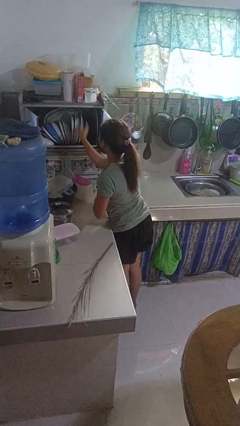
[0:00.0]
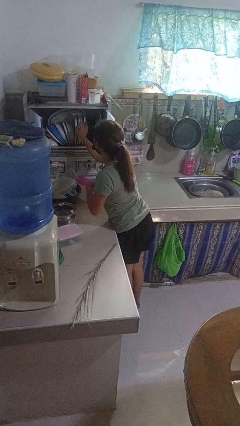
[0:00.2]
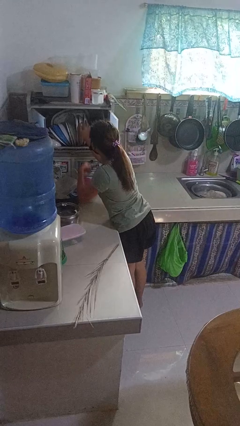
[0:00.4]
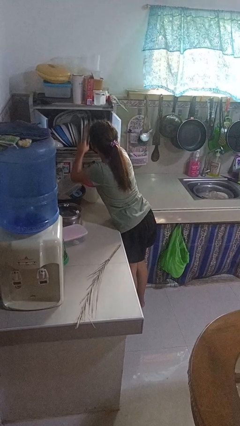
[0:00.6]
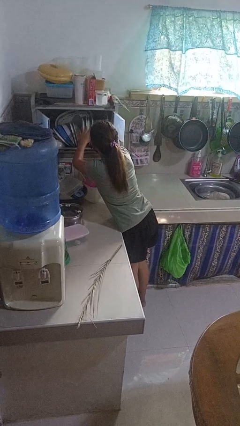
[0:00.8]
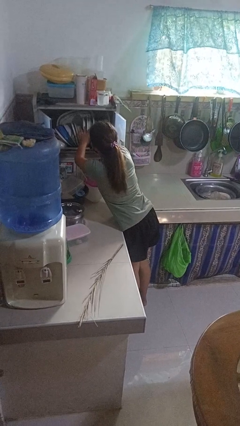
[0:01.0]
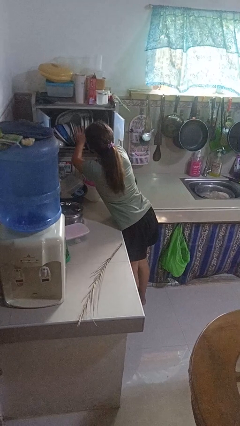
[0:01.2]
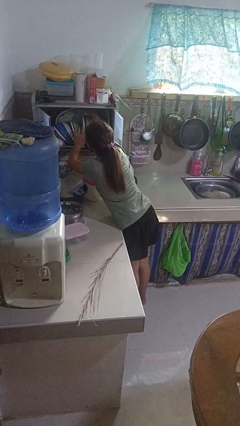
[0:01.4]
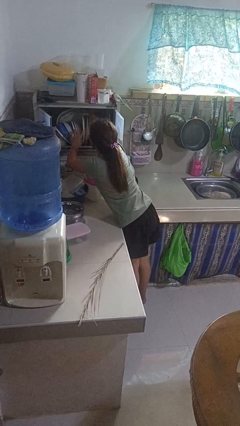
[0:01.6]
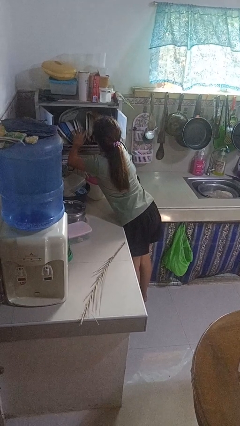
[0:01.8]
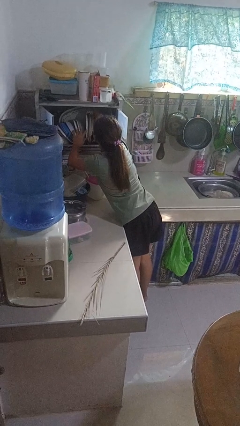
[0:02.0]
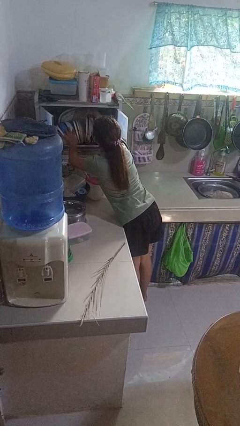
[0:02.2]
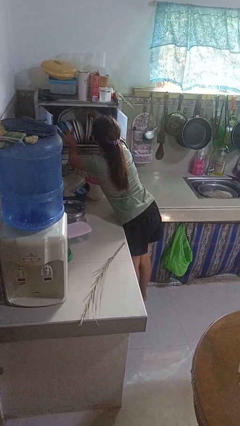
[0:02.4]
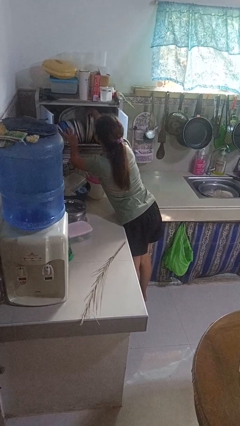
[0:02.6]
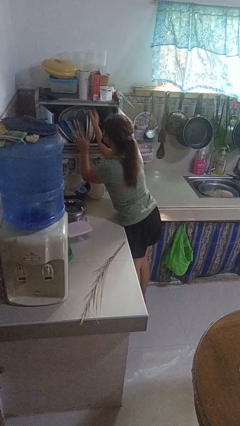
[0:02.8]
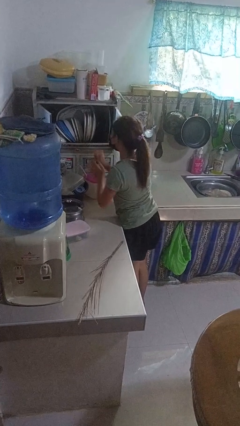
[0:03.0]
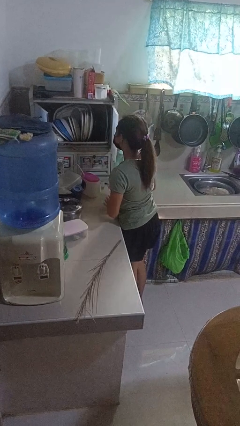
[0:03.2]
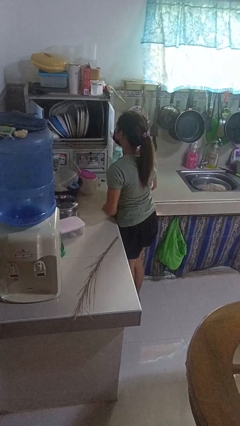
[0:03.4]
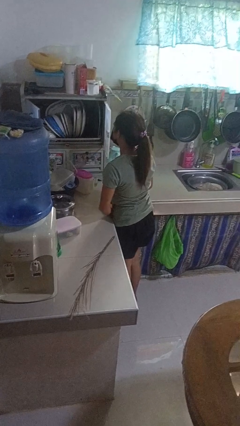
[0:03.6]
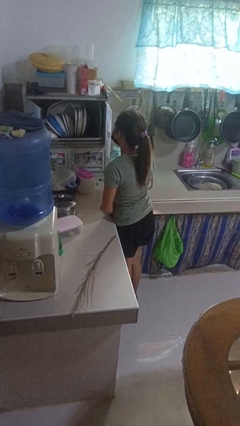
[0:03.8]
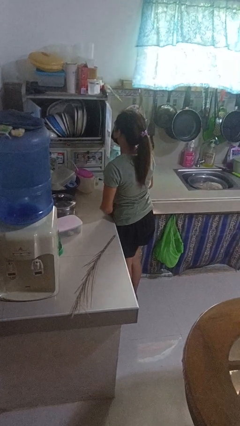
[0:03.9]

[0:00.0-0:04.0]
person searches in kitchen drawer

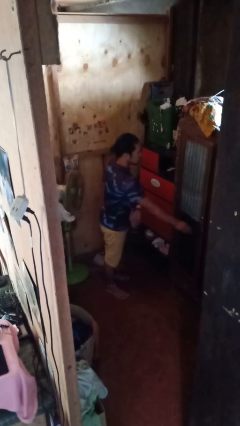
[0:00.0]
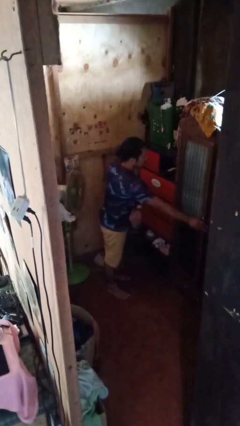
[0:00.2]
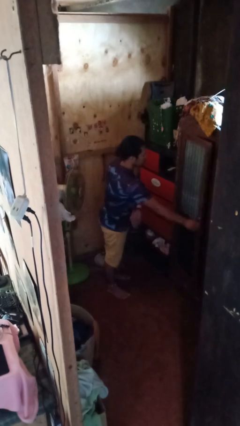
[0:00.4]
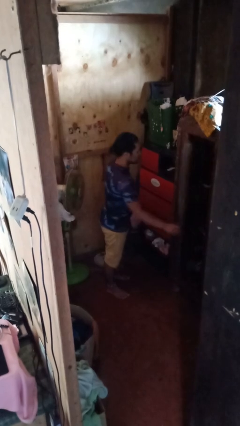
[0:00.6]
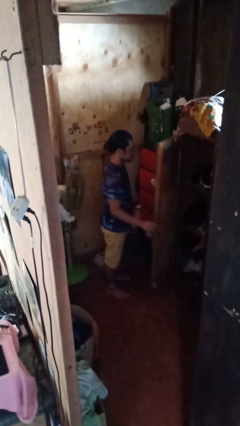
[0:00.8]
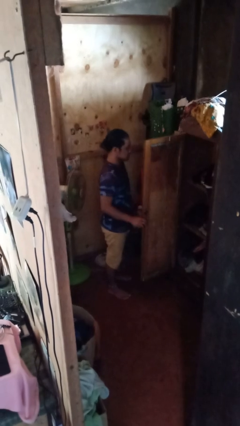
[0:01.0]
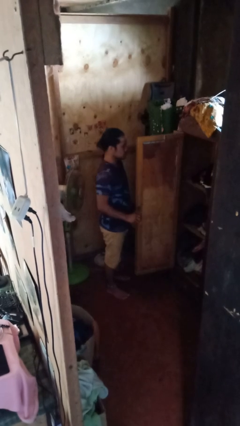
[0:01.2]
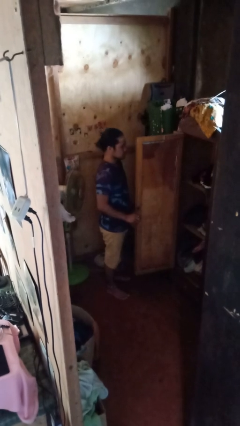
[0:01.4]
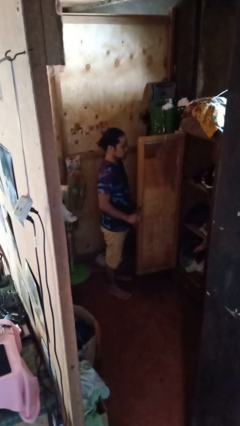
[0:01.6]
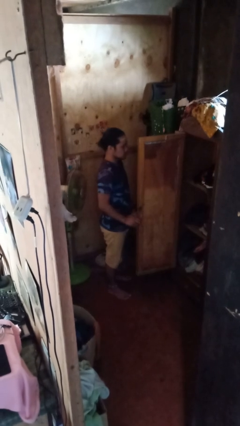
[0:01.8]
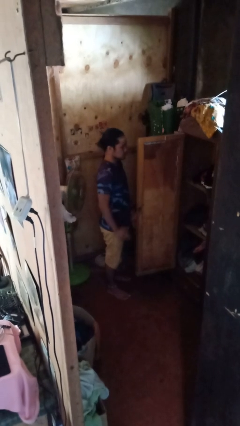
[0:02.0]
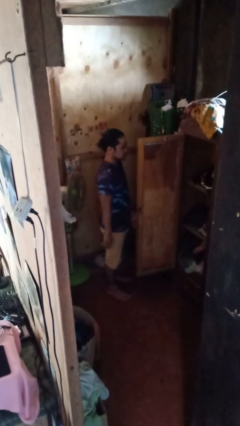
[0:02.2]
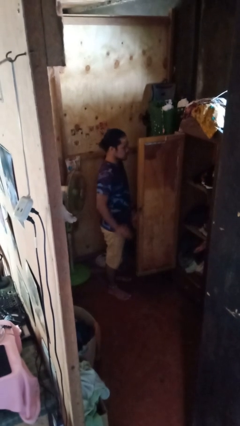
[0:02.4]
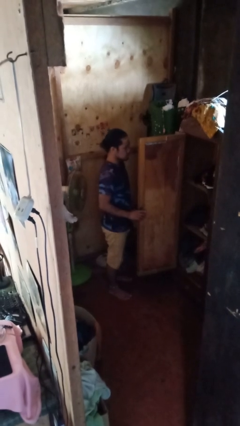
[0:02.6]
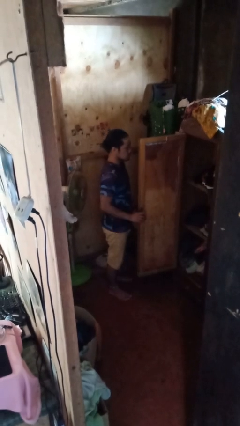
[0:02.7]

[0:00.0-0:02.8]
person opens closet door

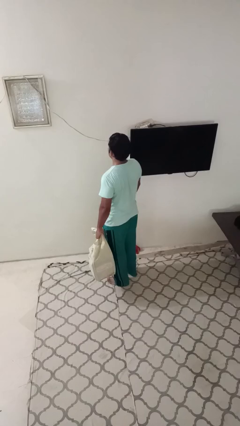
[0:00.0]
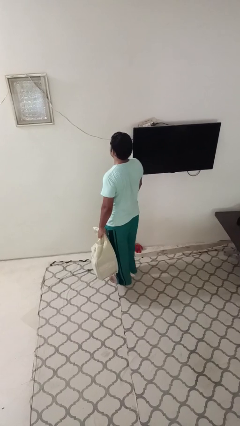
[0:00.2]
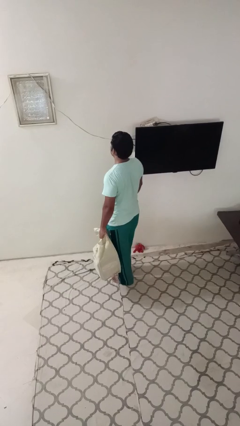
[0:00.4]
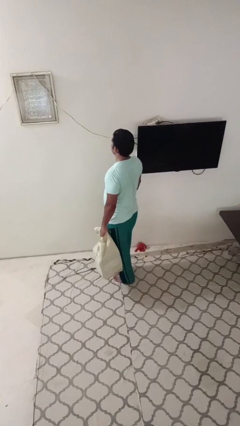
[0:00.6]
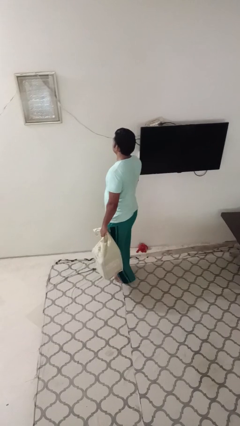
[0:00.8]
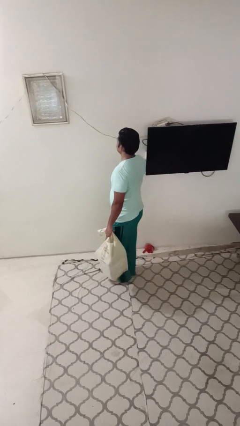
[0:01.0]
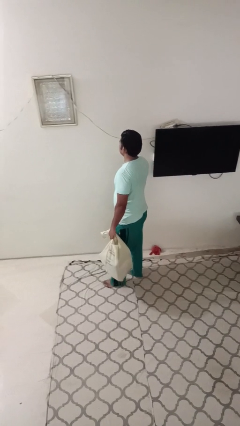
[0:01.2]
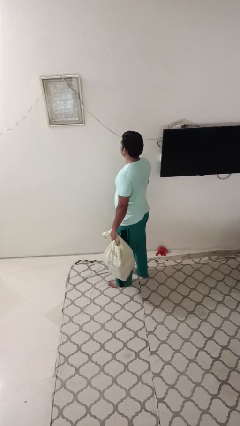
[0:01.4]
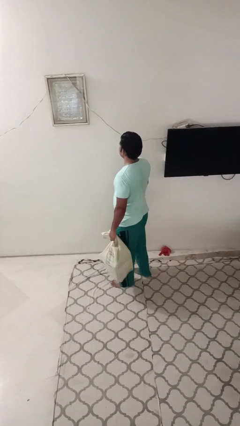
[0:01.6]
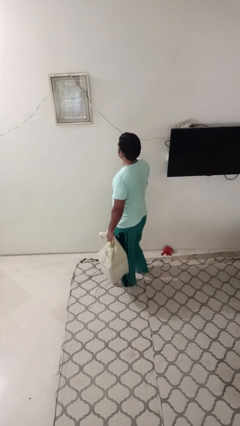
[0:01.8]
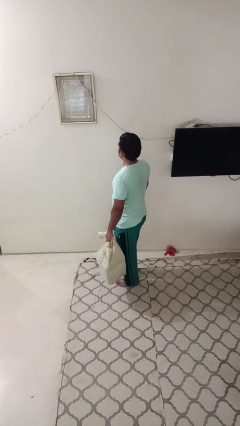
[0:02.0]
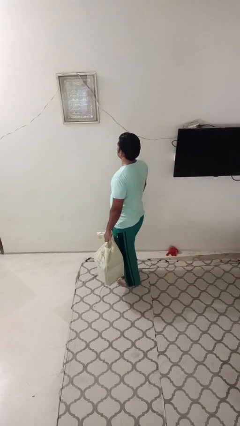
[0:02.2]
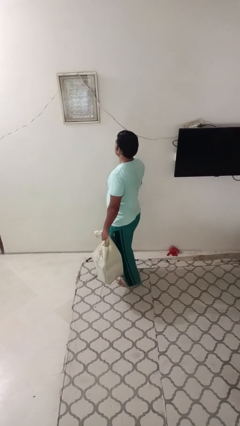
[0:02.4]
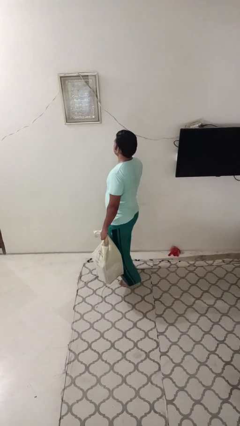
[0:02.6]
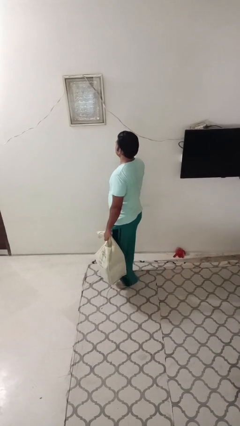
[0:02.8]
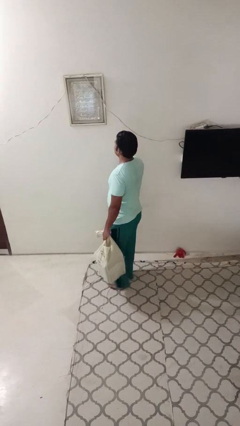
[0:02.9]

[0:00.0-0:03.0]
person carries groceries

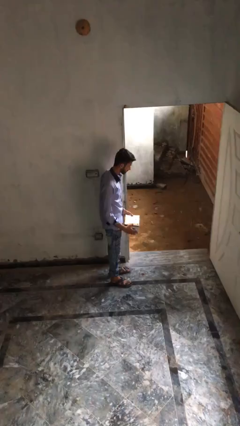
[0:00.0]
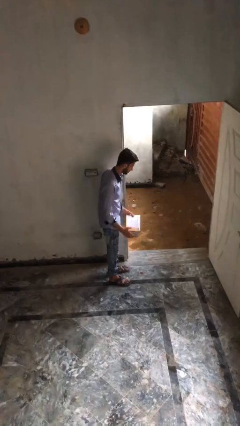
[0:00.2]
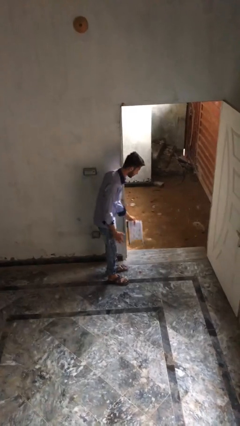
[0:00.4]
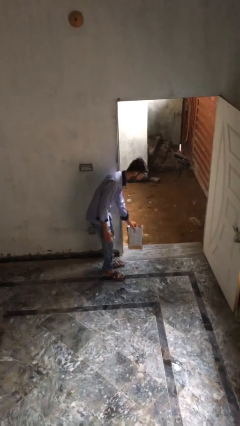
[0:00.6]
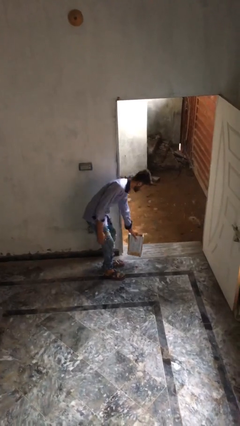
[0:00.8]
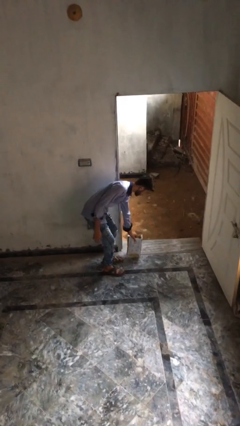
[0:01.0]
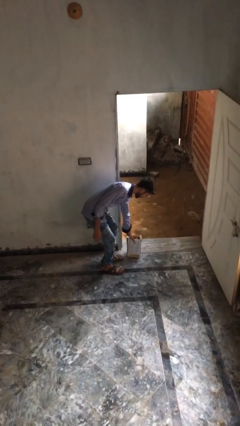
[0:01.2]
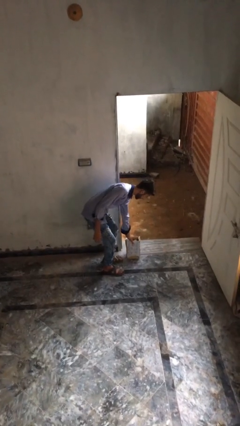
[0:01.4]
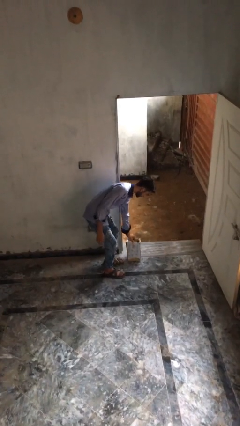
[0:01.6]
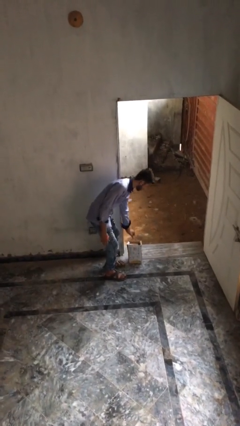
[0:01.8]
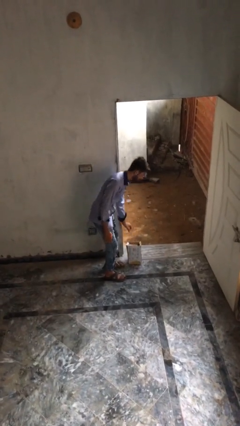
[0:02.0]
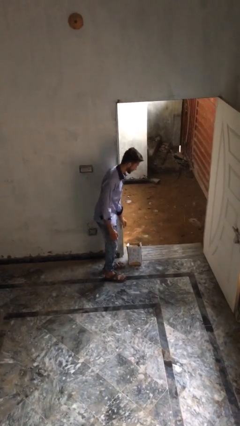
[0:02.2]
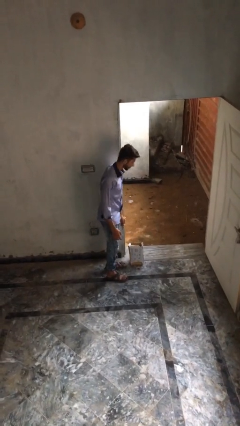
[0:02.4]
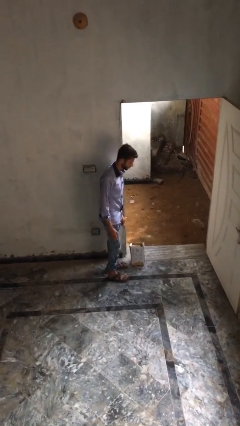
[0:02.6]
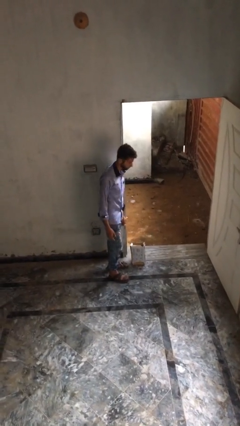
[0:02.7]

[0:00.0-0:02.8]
person puts down object on floor

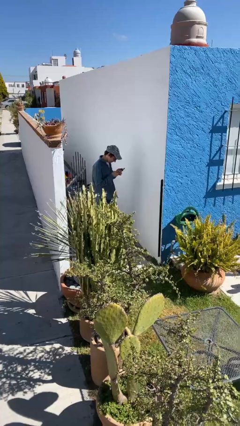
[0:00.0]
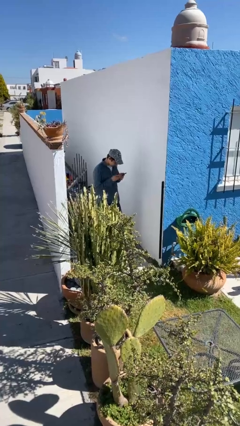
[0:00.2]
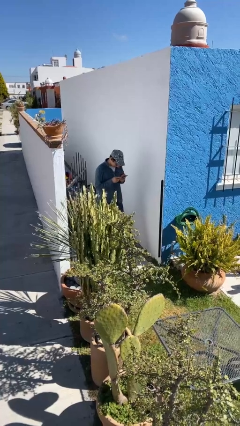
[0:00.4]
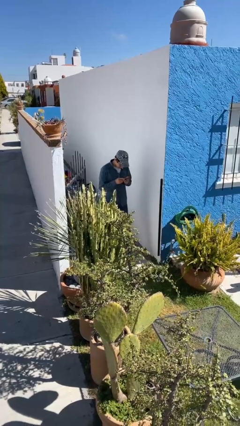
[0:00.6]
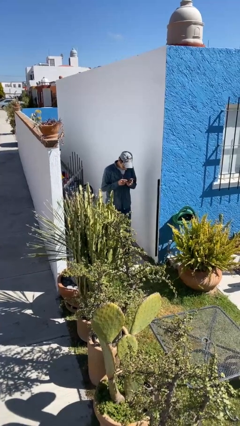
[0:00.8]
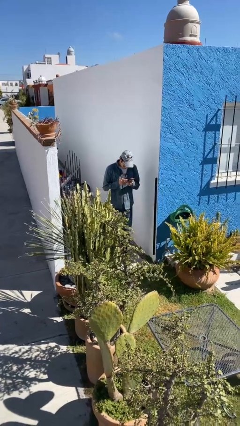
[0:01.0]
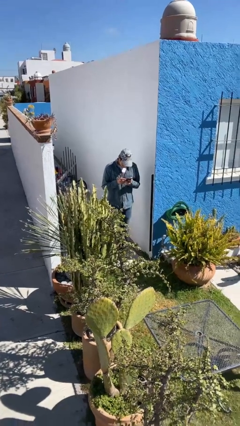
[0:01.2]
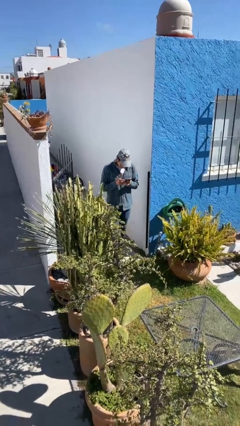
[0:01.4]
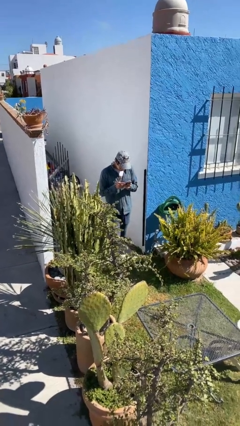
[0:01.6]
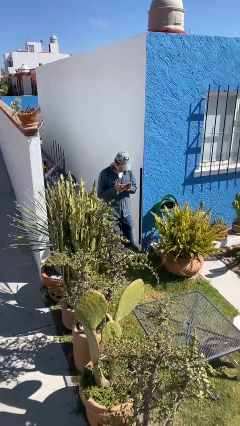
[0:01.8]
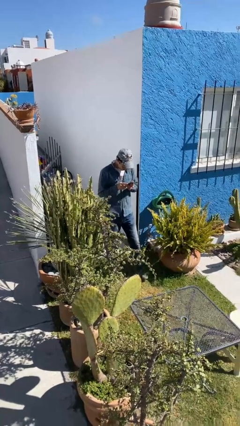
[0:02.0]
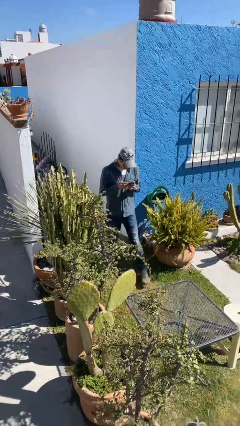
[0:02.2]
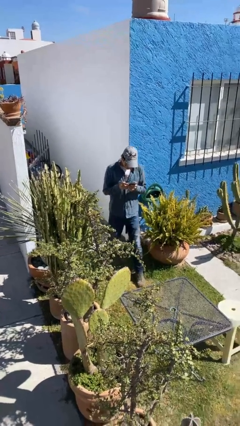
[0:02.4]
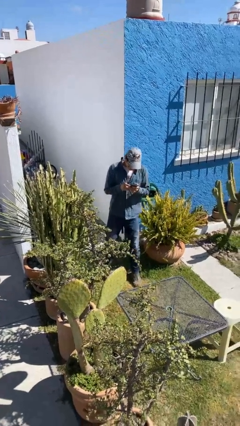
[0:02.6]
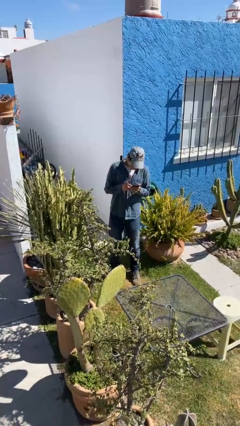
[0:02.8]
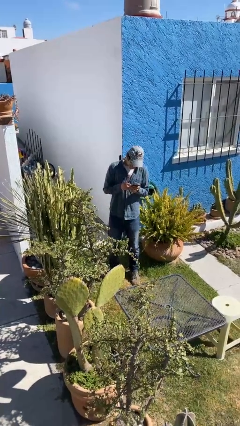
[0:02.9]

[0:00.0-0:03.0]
person enters scene through structure

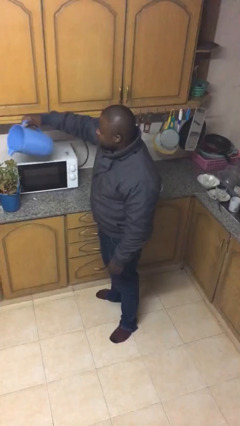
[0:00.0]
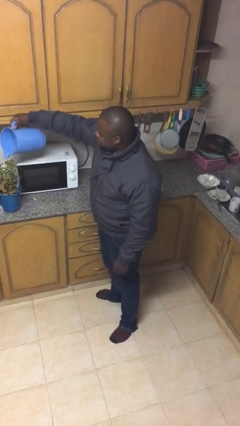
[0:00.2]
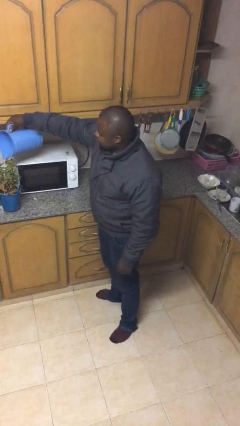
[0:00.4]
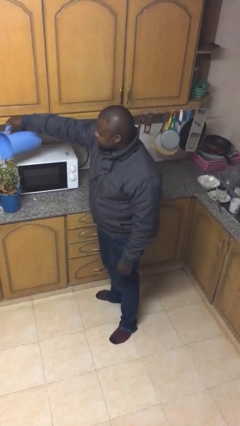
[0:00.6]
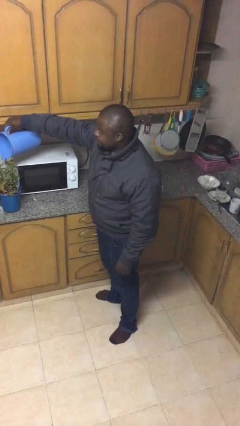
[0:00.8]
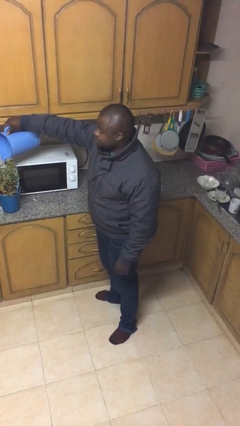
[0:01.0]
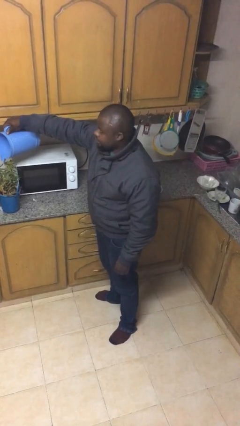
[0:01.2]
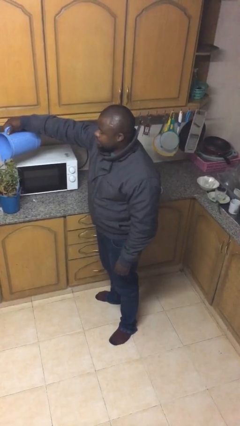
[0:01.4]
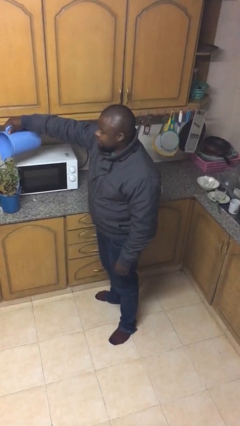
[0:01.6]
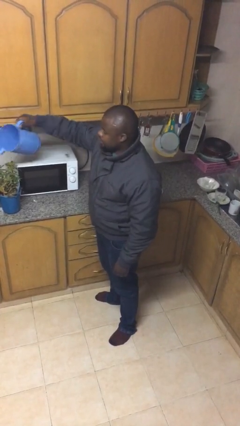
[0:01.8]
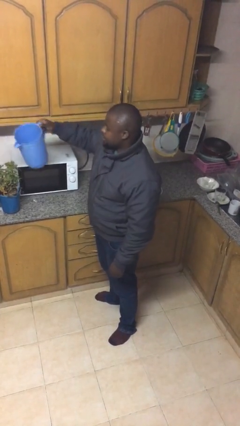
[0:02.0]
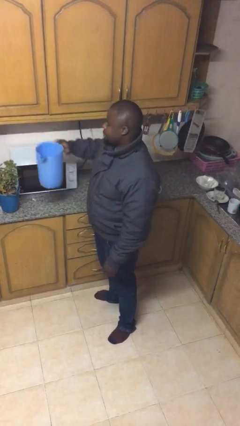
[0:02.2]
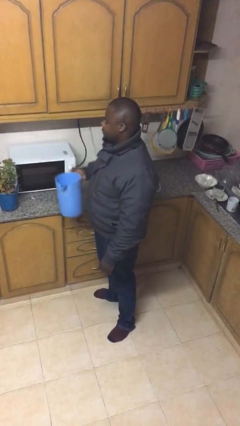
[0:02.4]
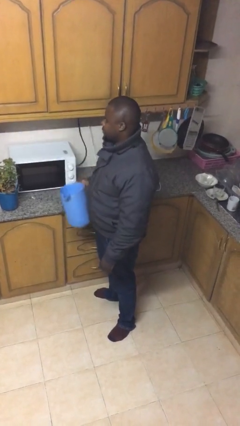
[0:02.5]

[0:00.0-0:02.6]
person waters houseplant
